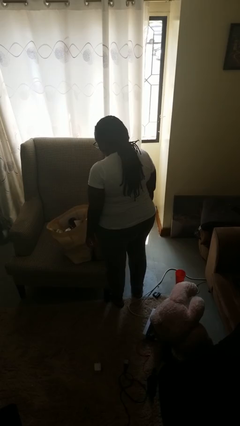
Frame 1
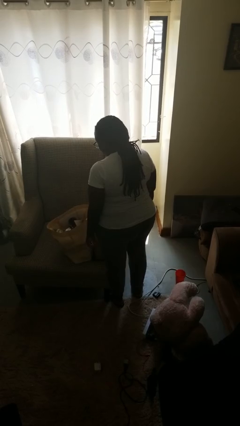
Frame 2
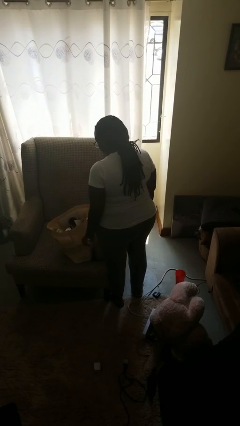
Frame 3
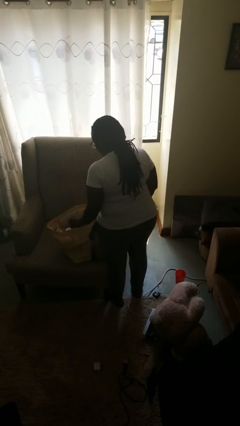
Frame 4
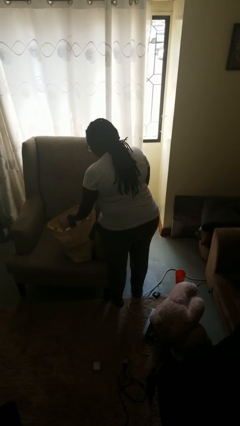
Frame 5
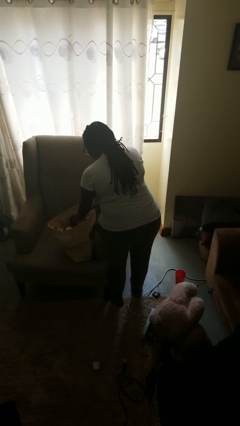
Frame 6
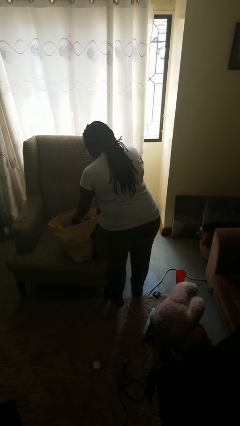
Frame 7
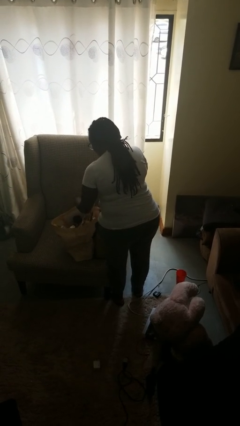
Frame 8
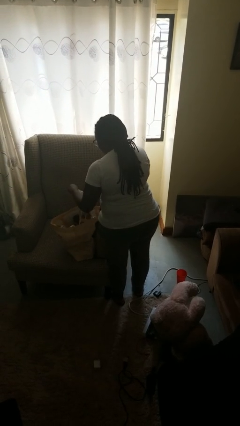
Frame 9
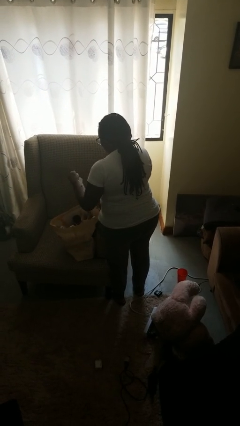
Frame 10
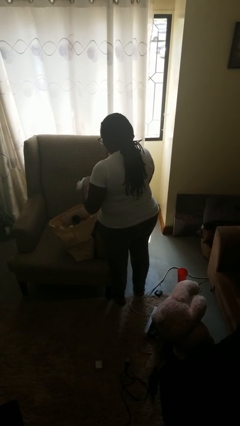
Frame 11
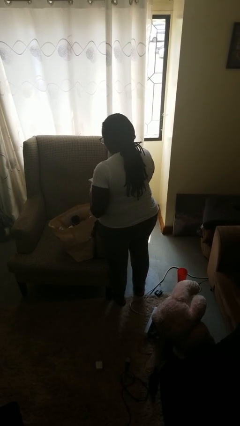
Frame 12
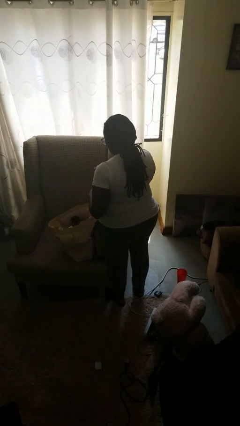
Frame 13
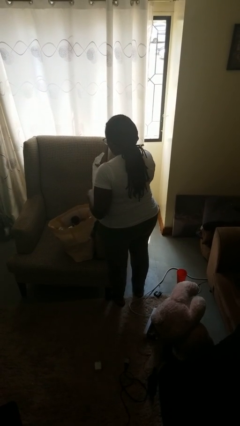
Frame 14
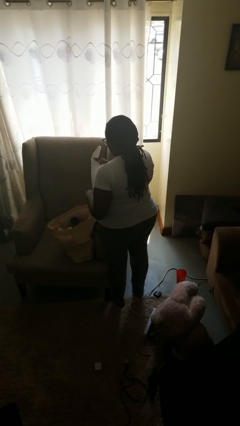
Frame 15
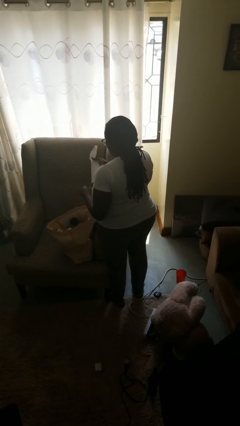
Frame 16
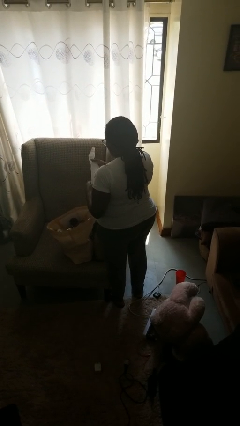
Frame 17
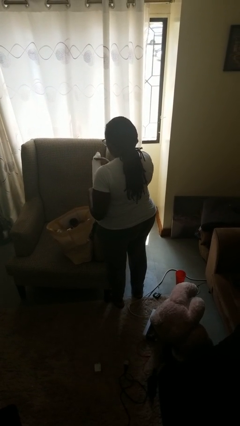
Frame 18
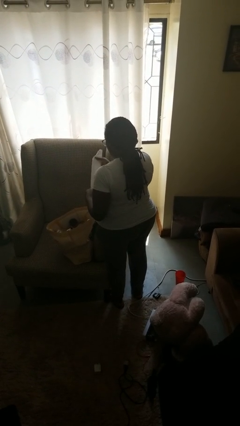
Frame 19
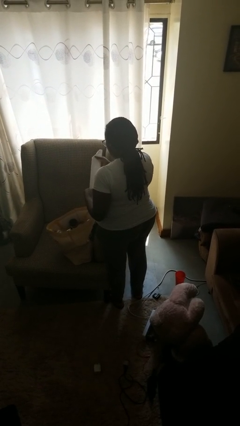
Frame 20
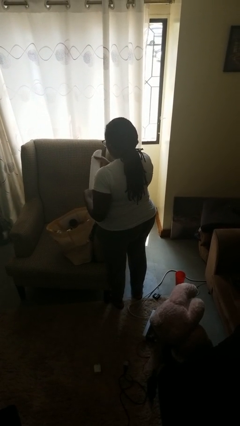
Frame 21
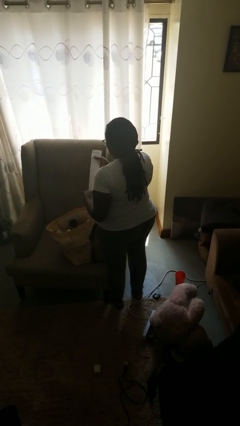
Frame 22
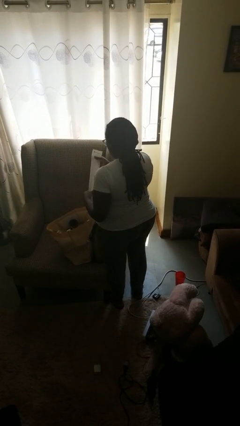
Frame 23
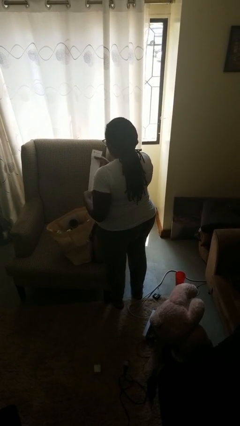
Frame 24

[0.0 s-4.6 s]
person takes object from bag

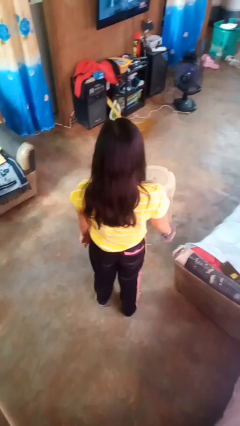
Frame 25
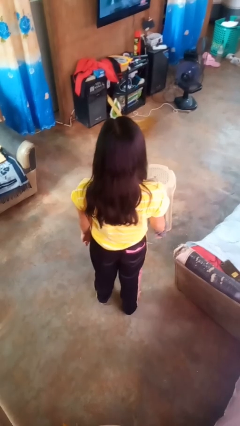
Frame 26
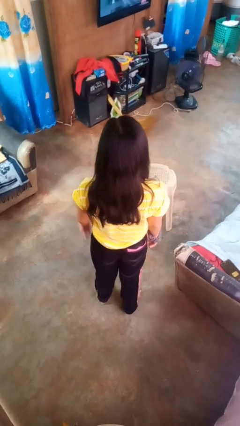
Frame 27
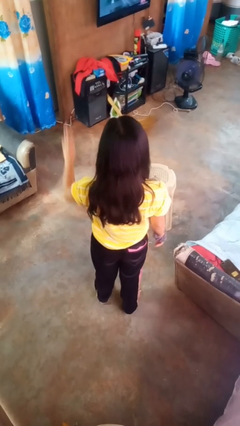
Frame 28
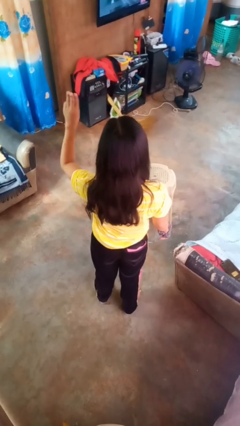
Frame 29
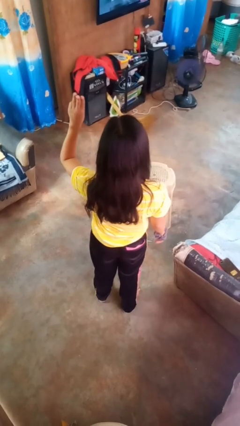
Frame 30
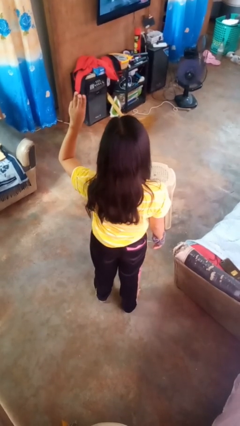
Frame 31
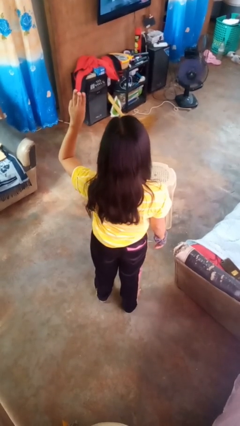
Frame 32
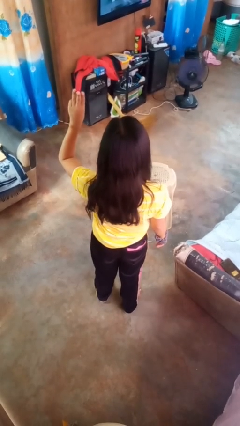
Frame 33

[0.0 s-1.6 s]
person gestures number three

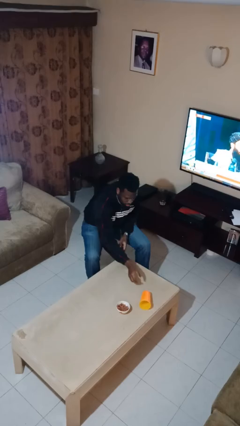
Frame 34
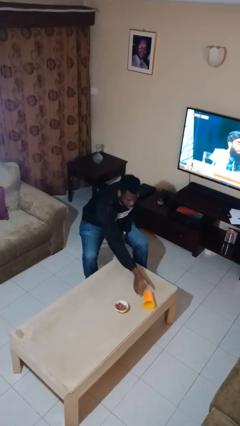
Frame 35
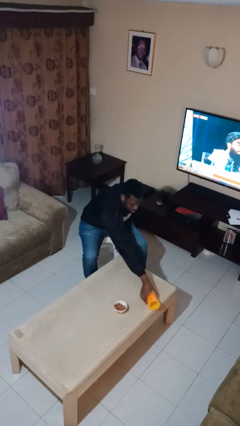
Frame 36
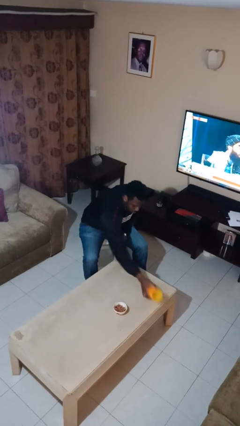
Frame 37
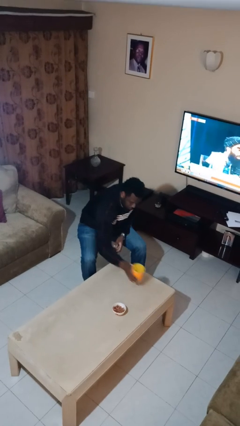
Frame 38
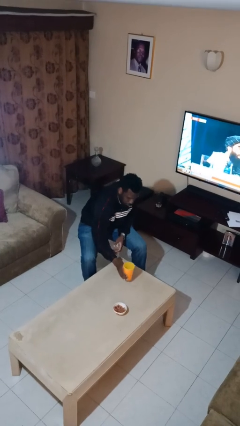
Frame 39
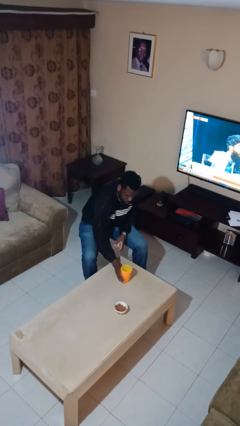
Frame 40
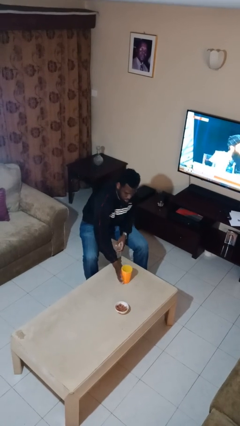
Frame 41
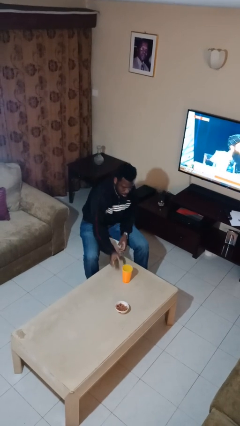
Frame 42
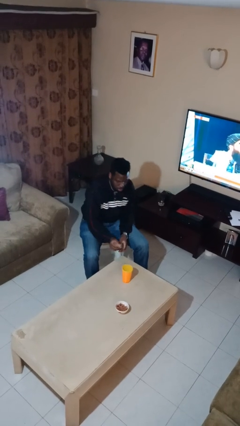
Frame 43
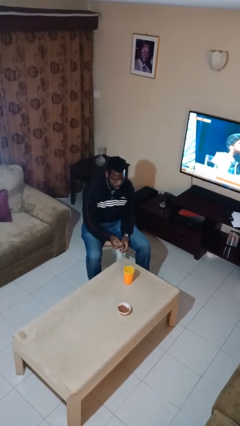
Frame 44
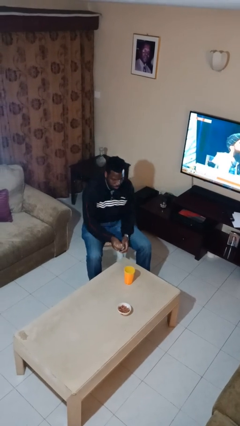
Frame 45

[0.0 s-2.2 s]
person sets upright glass

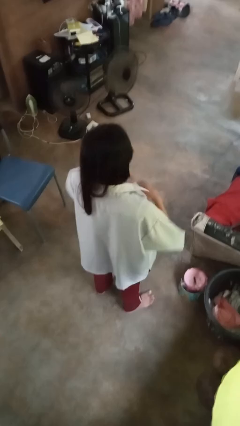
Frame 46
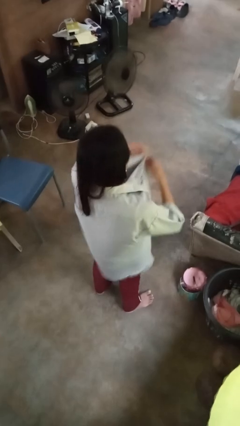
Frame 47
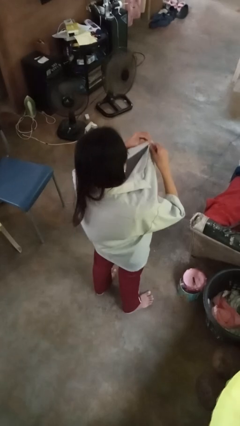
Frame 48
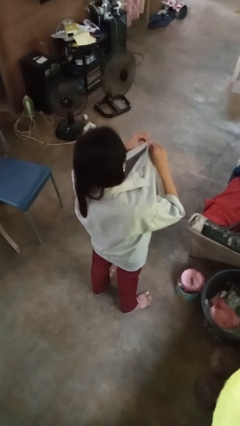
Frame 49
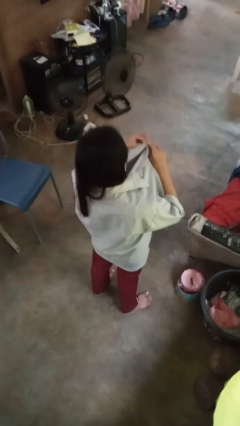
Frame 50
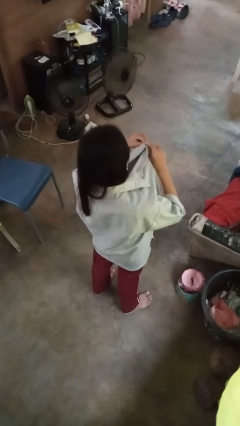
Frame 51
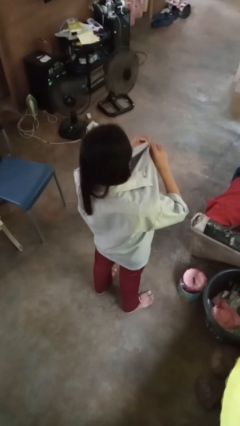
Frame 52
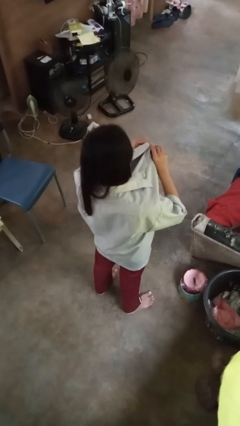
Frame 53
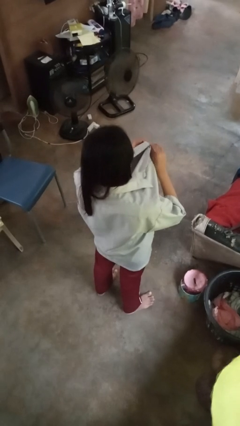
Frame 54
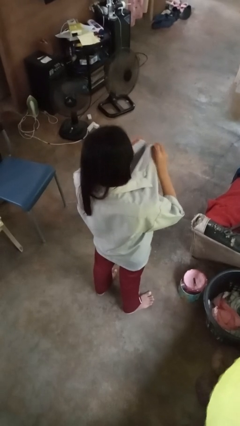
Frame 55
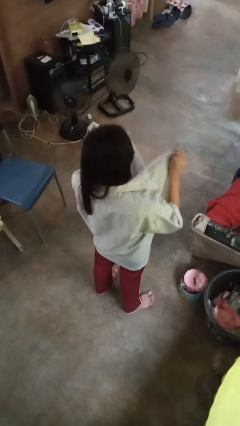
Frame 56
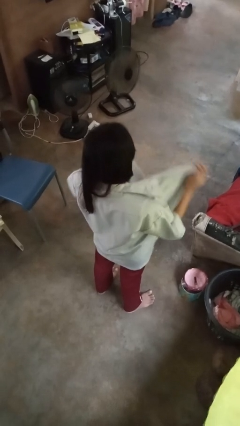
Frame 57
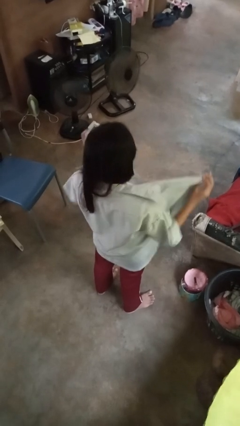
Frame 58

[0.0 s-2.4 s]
person unbuttons shirt

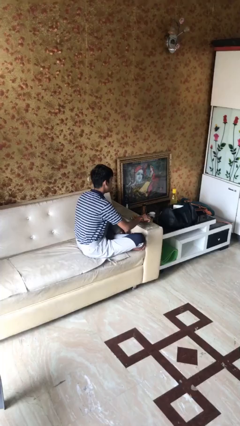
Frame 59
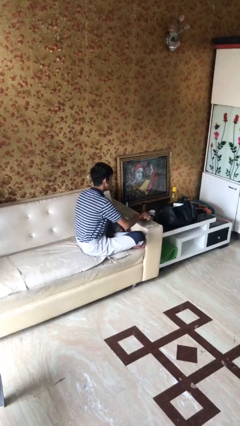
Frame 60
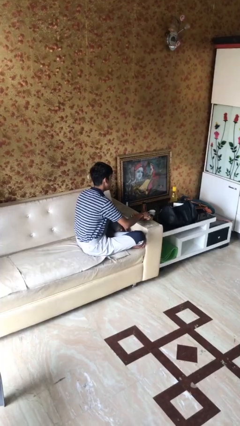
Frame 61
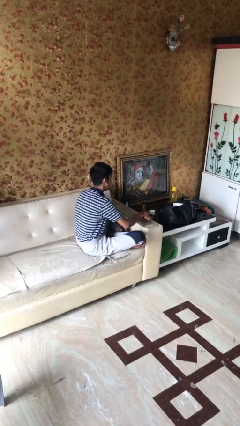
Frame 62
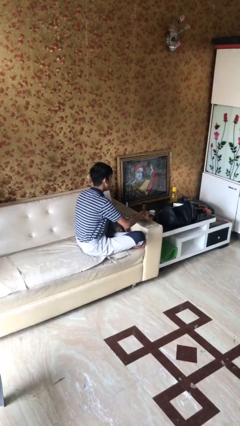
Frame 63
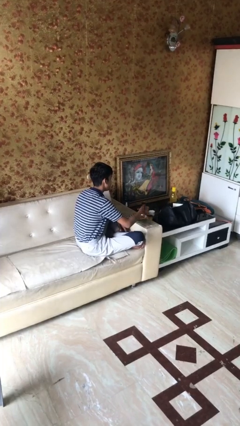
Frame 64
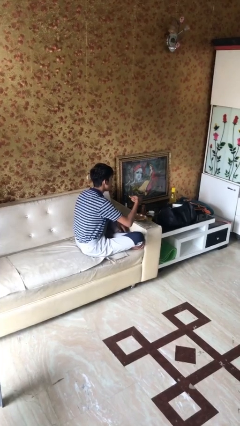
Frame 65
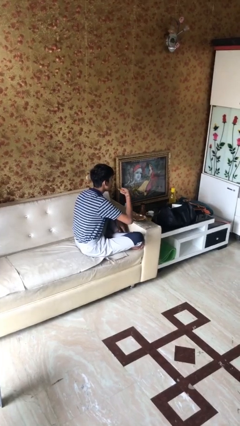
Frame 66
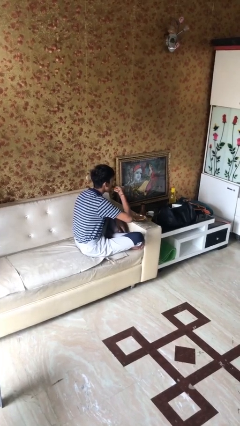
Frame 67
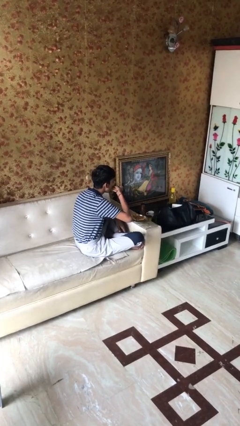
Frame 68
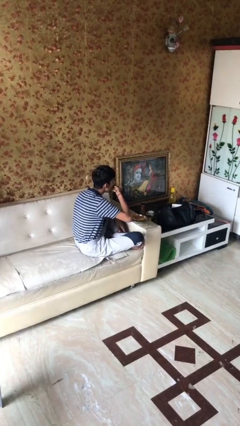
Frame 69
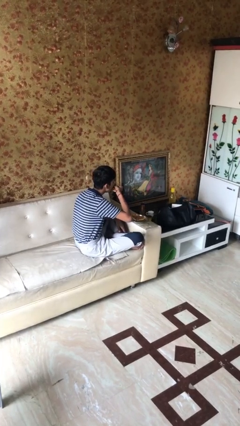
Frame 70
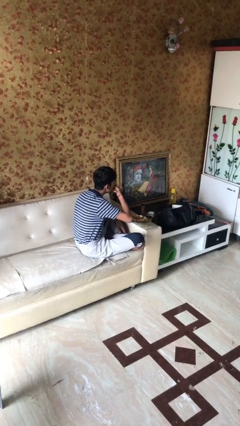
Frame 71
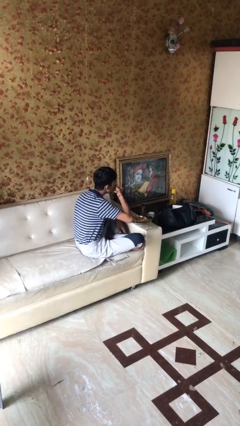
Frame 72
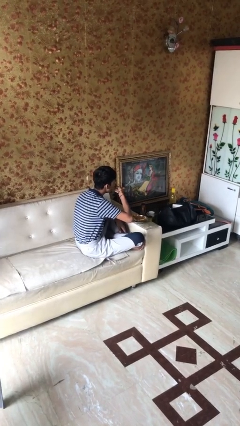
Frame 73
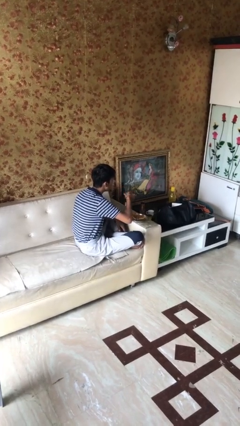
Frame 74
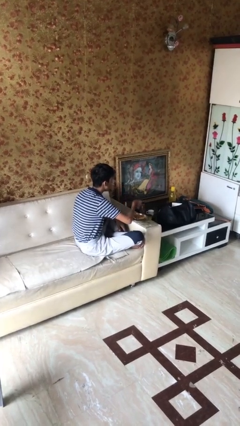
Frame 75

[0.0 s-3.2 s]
person eats with hands

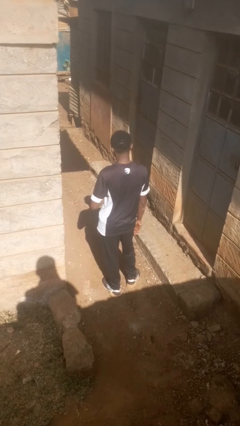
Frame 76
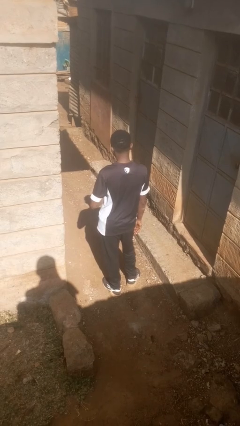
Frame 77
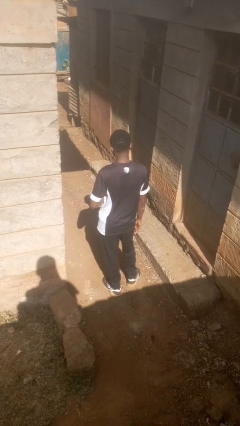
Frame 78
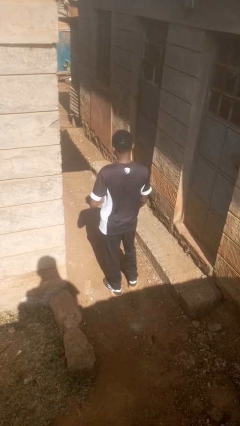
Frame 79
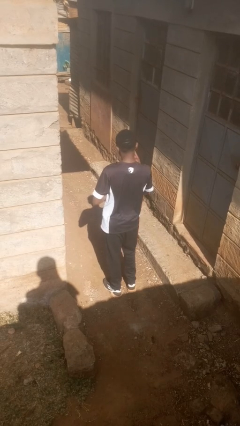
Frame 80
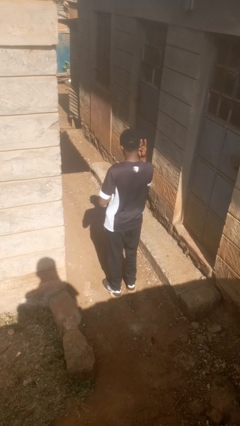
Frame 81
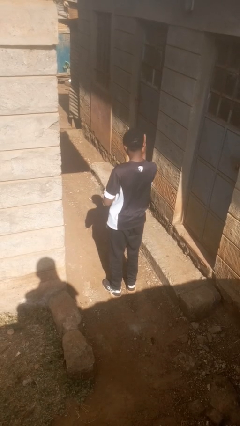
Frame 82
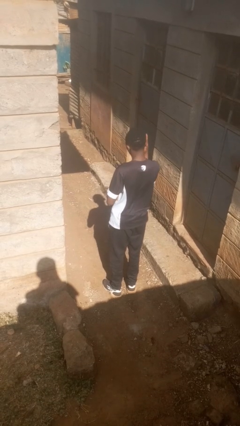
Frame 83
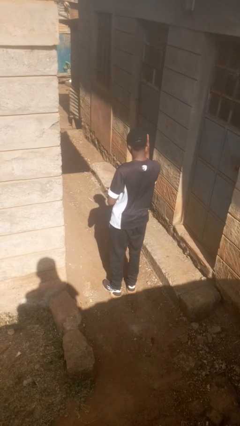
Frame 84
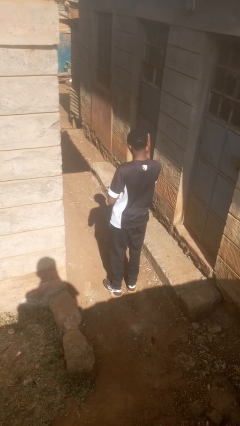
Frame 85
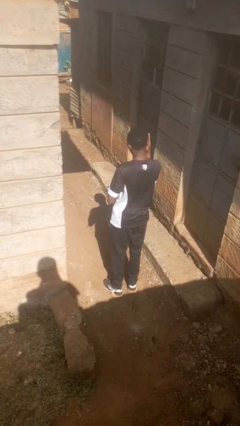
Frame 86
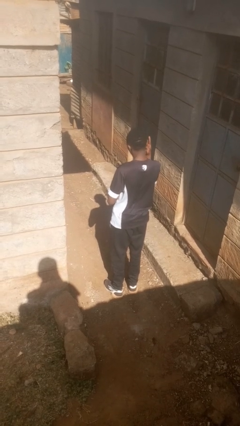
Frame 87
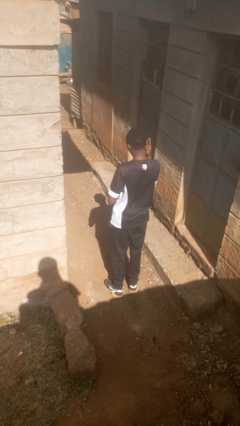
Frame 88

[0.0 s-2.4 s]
person gestures number four

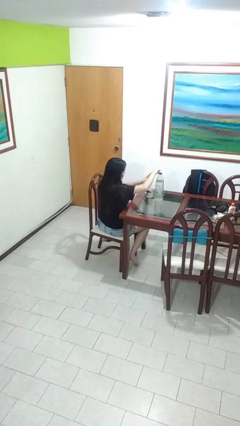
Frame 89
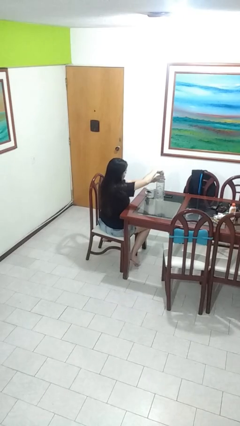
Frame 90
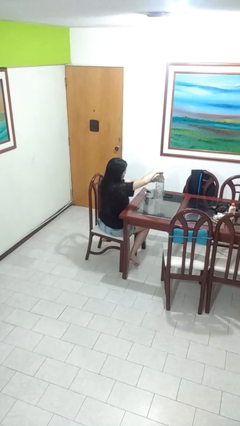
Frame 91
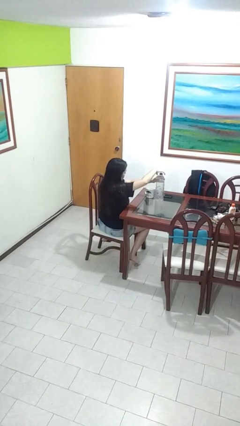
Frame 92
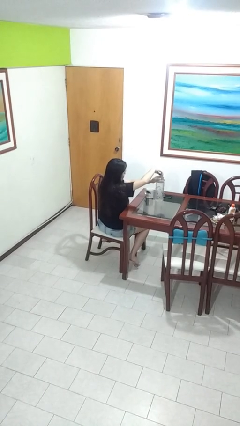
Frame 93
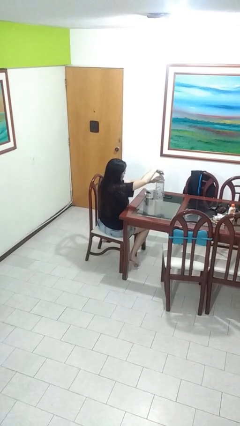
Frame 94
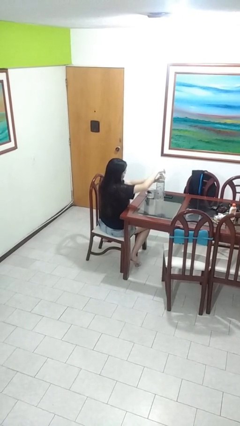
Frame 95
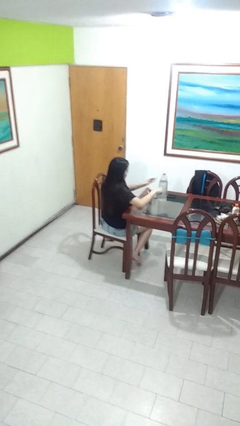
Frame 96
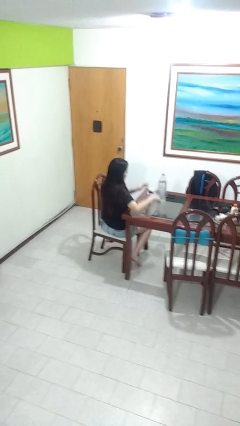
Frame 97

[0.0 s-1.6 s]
person unscrews lid from bottle
